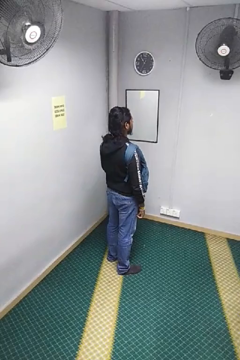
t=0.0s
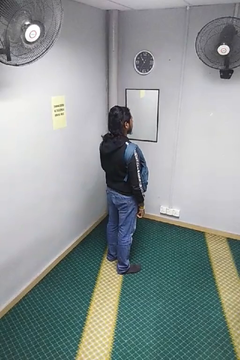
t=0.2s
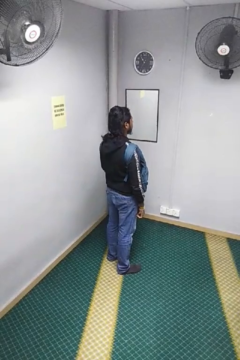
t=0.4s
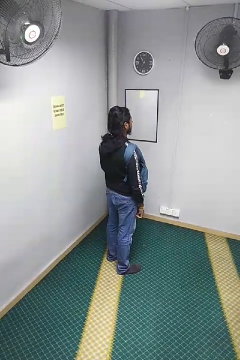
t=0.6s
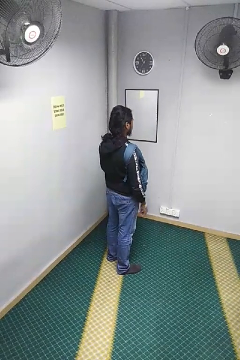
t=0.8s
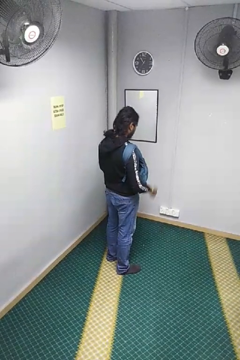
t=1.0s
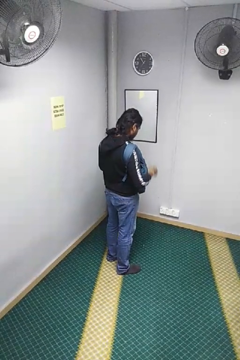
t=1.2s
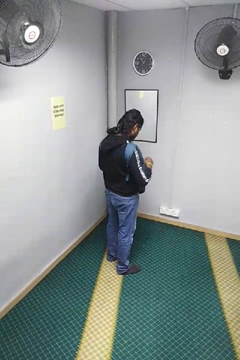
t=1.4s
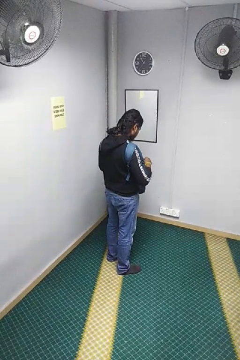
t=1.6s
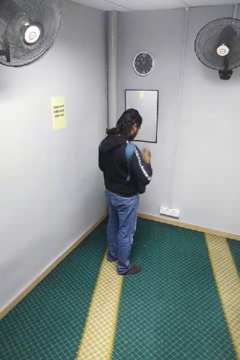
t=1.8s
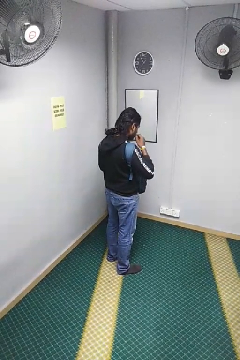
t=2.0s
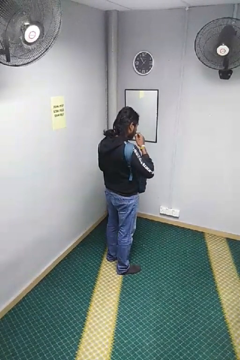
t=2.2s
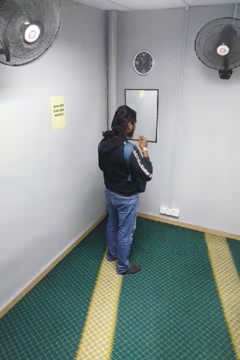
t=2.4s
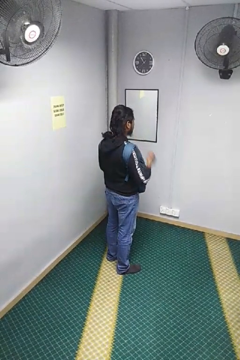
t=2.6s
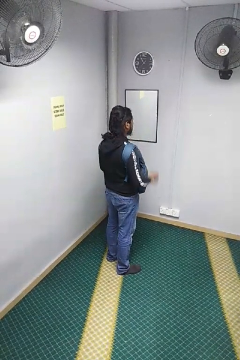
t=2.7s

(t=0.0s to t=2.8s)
person eats snack from bag

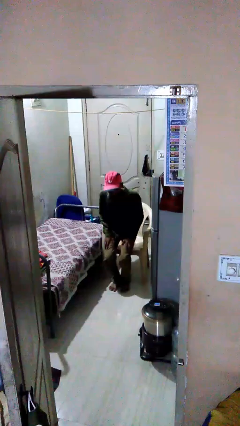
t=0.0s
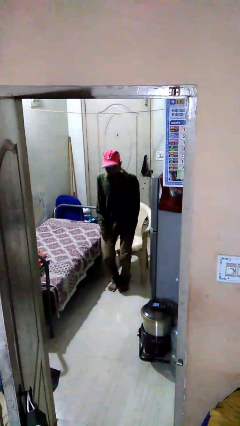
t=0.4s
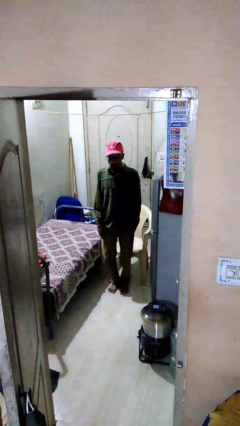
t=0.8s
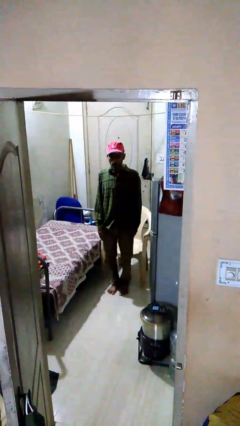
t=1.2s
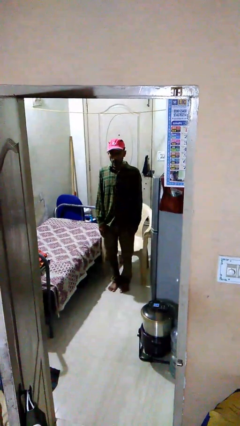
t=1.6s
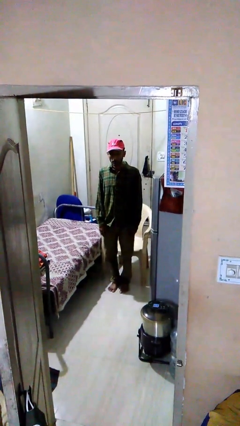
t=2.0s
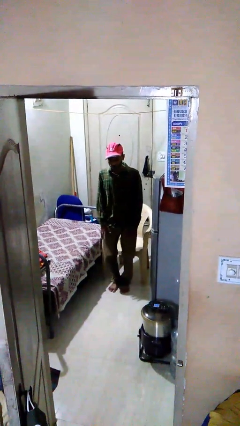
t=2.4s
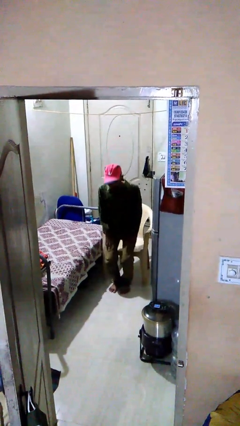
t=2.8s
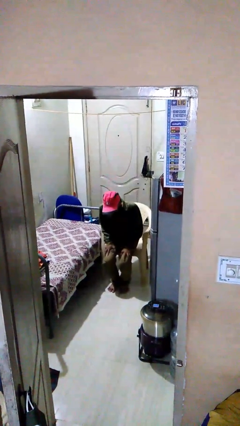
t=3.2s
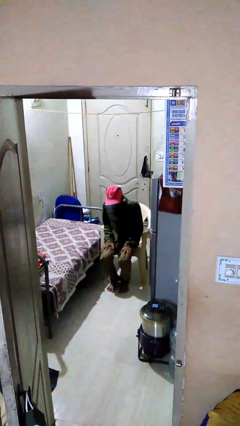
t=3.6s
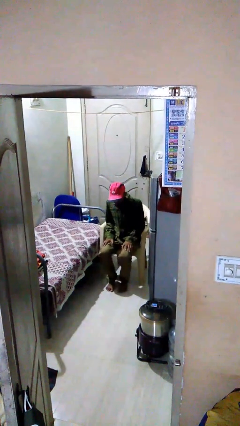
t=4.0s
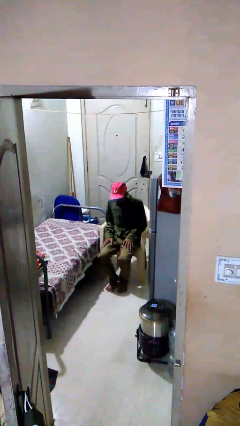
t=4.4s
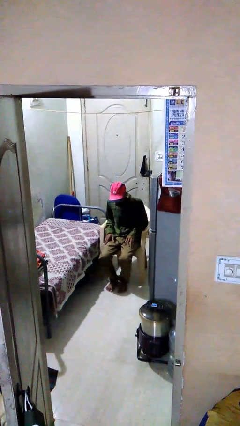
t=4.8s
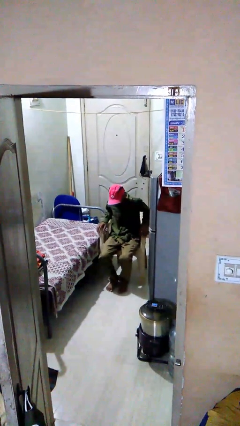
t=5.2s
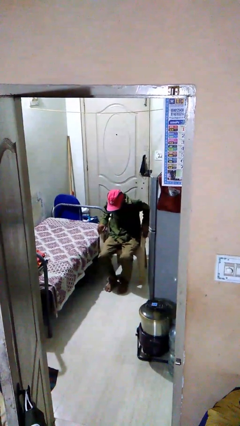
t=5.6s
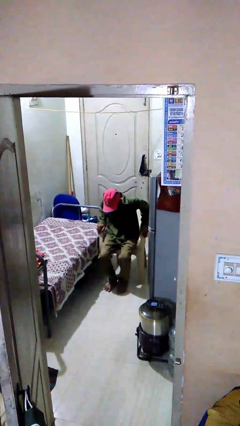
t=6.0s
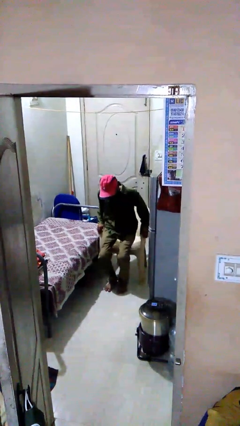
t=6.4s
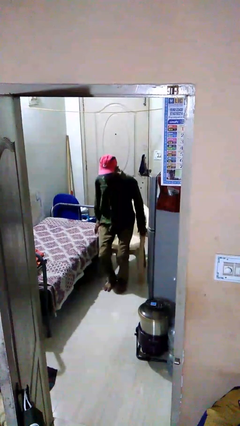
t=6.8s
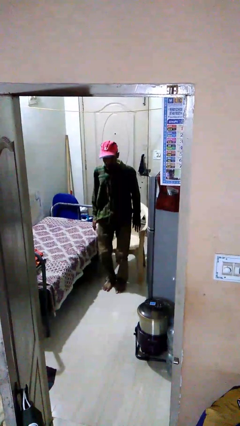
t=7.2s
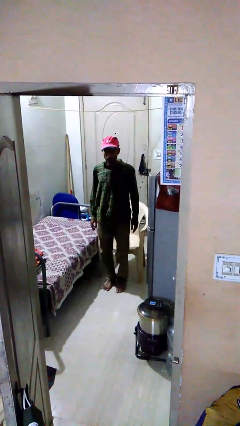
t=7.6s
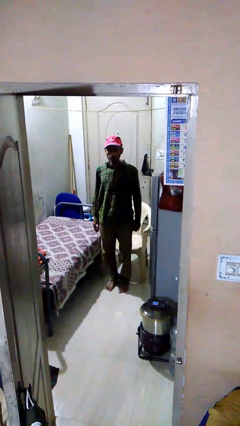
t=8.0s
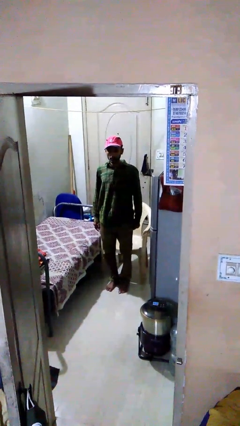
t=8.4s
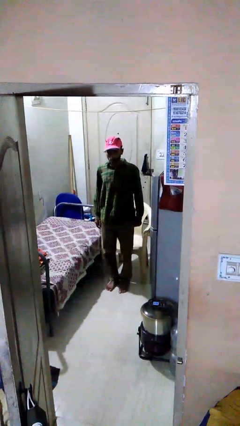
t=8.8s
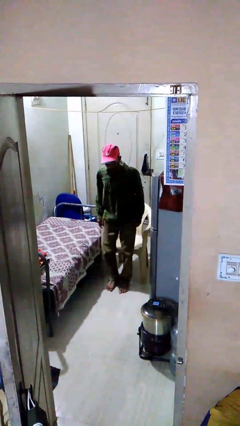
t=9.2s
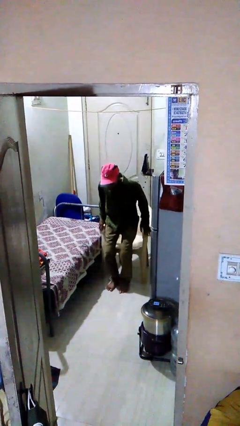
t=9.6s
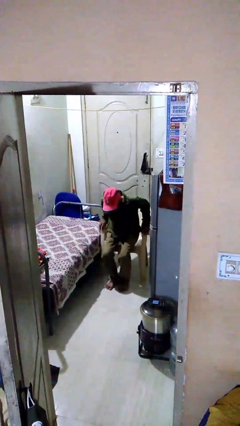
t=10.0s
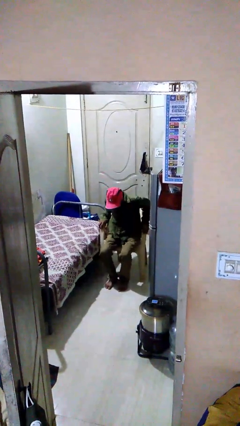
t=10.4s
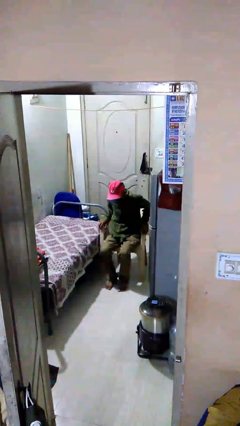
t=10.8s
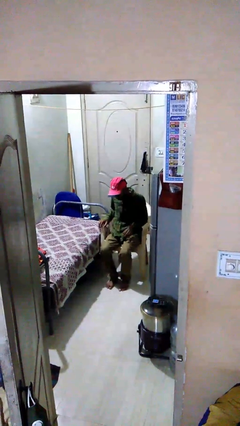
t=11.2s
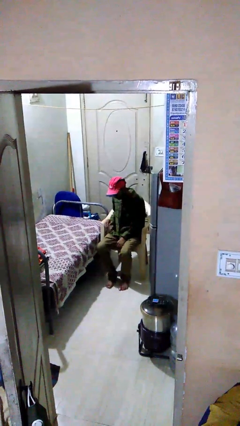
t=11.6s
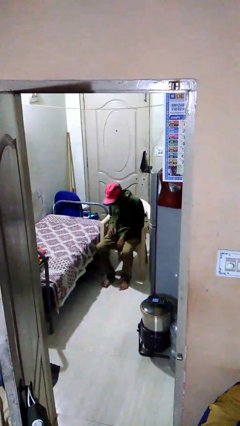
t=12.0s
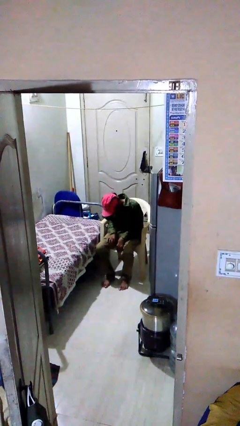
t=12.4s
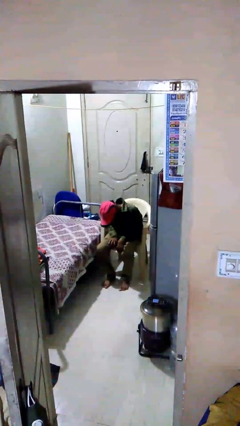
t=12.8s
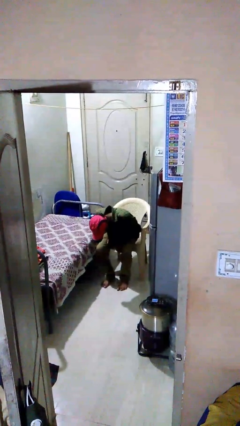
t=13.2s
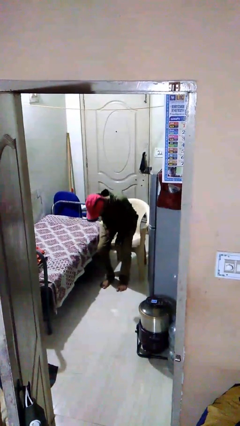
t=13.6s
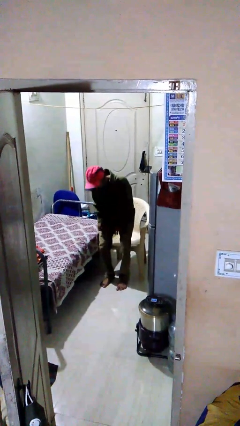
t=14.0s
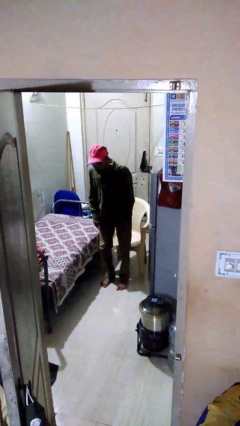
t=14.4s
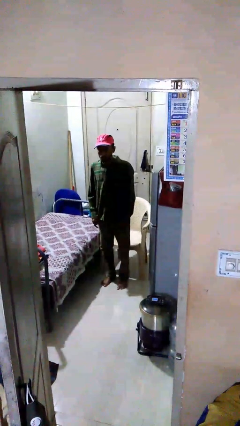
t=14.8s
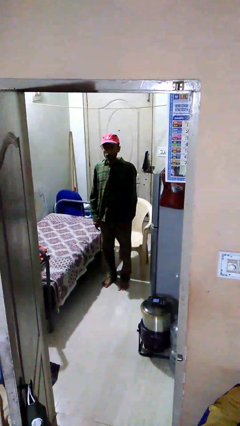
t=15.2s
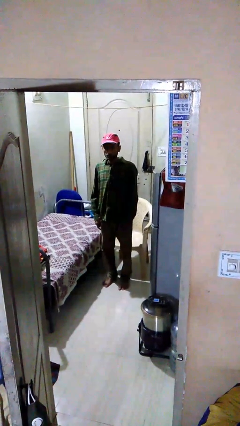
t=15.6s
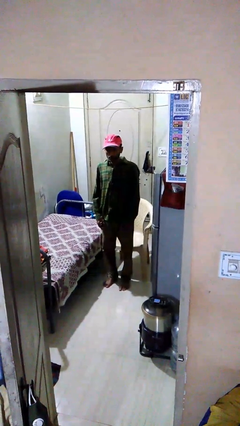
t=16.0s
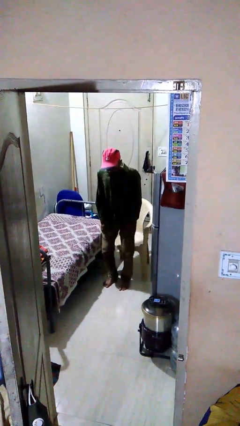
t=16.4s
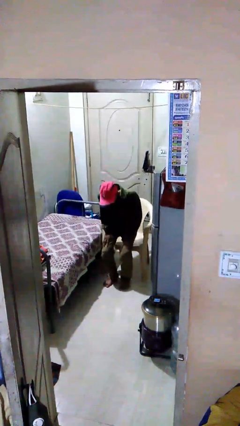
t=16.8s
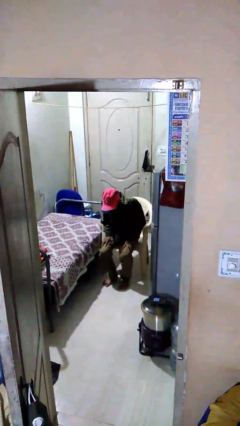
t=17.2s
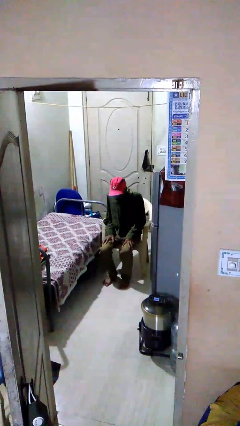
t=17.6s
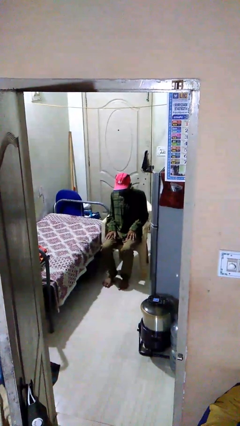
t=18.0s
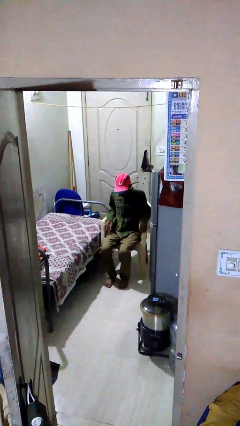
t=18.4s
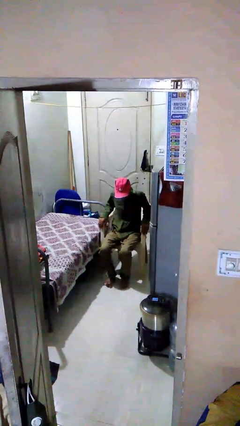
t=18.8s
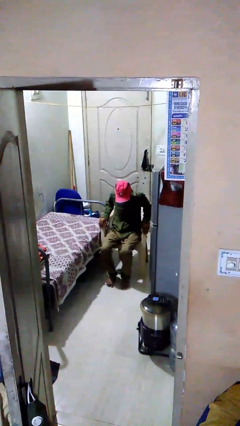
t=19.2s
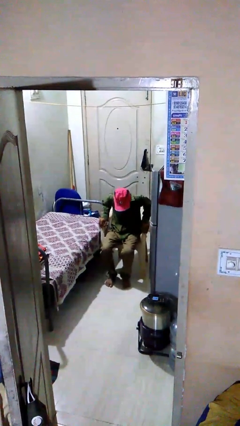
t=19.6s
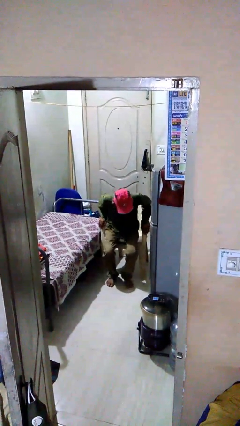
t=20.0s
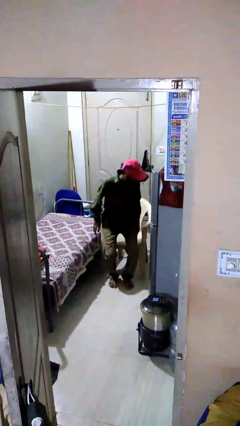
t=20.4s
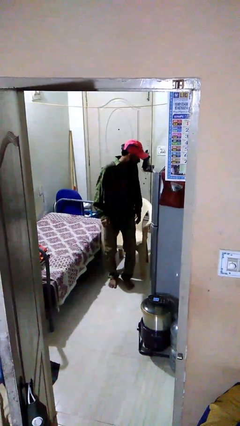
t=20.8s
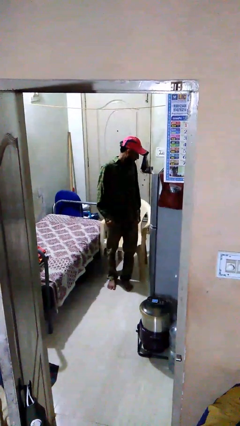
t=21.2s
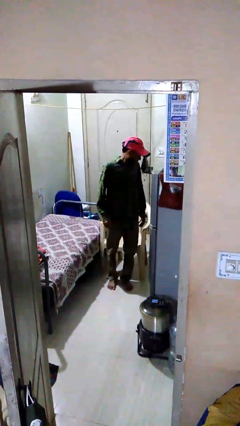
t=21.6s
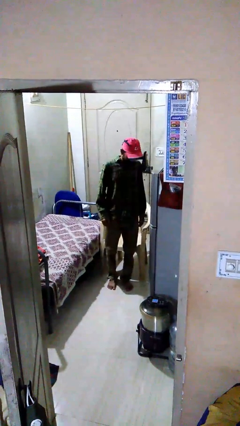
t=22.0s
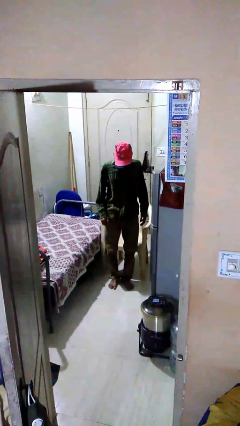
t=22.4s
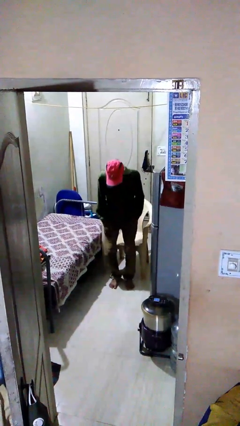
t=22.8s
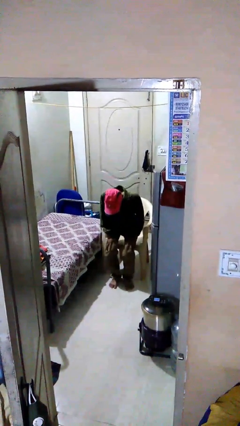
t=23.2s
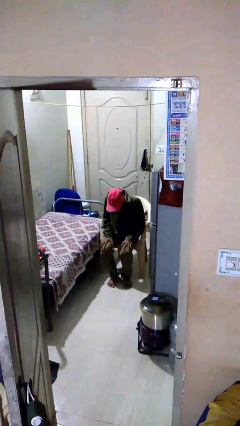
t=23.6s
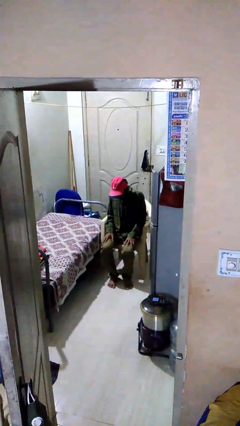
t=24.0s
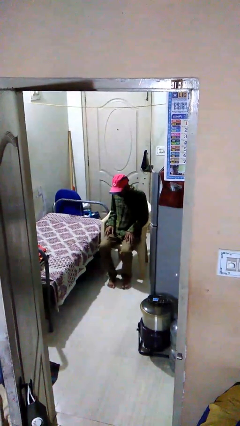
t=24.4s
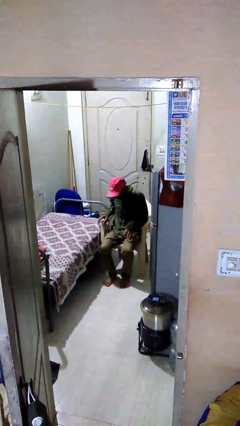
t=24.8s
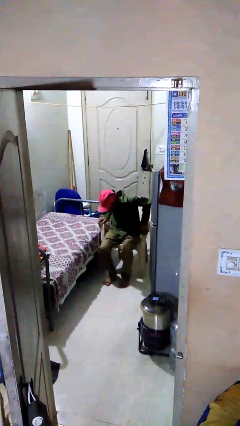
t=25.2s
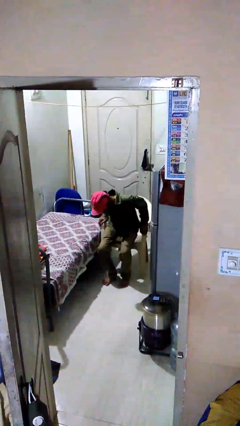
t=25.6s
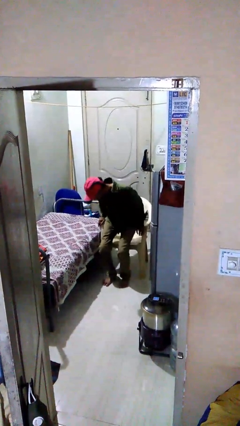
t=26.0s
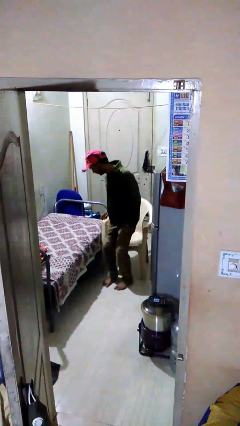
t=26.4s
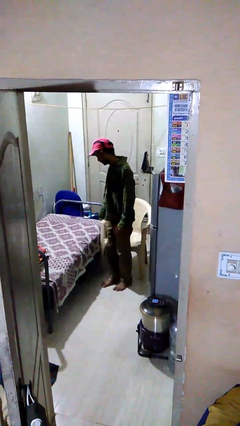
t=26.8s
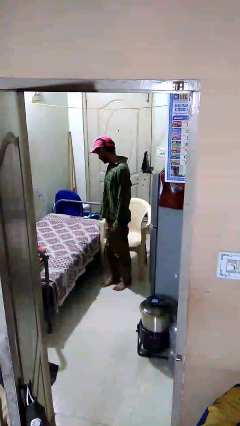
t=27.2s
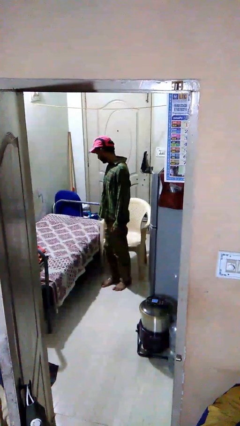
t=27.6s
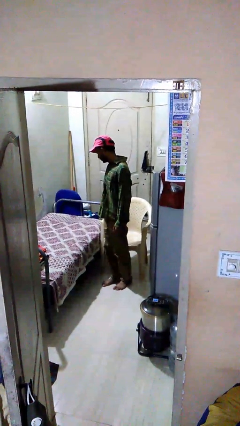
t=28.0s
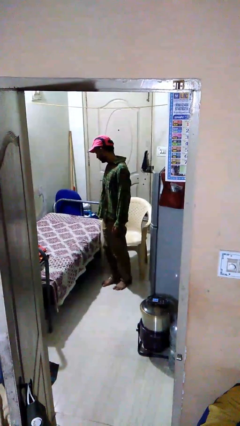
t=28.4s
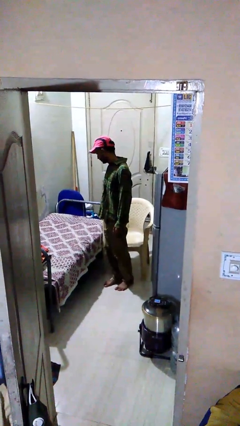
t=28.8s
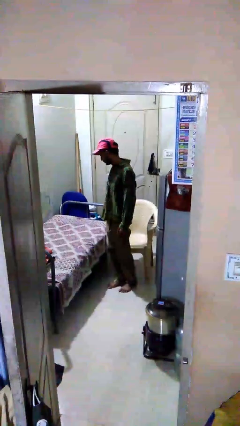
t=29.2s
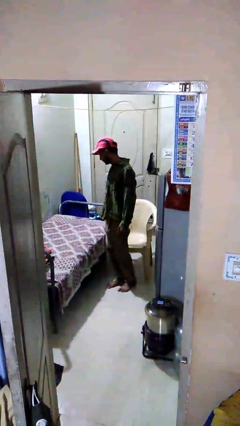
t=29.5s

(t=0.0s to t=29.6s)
person stands up

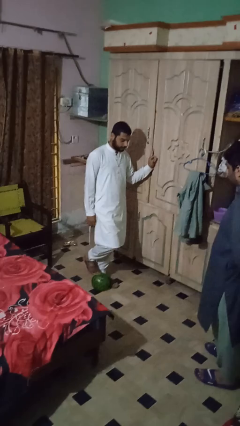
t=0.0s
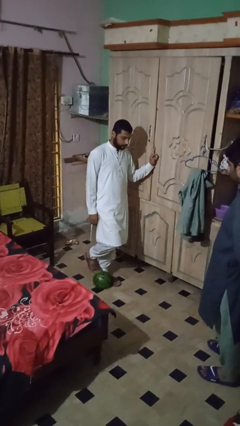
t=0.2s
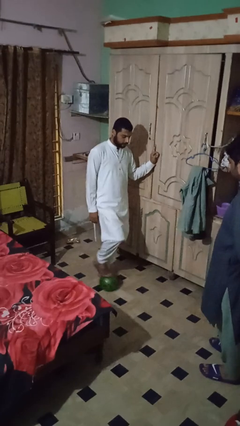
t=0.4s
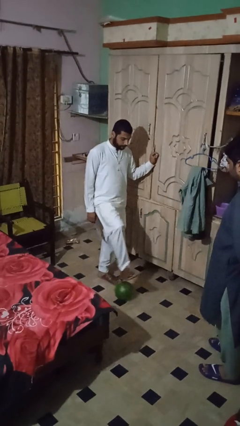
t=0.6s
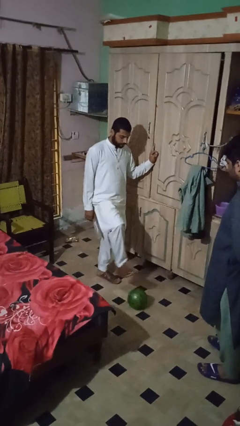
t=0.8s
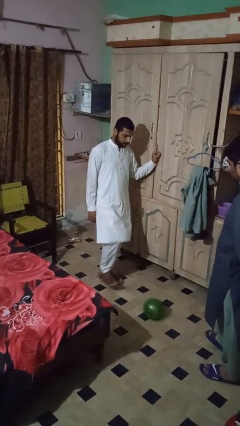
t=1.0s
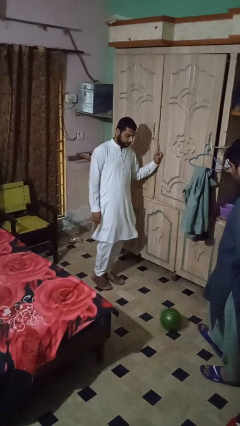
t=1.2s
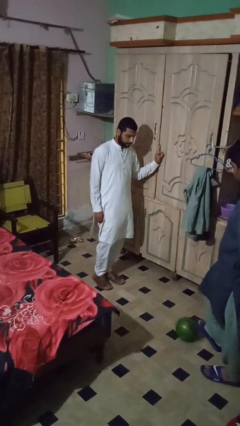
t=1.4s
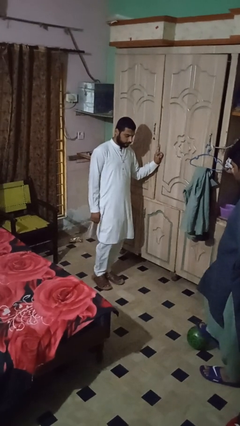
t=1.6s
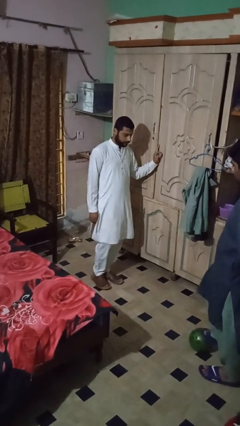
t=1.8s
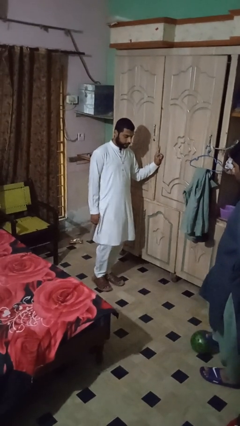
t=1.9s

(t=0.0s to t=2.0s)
person kicks object to person
